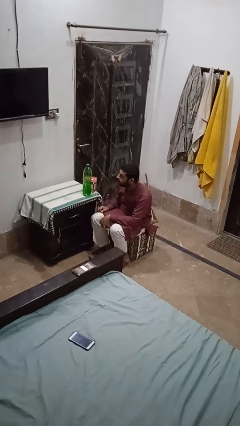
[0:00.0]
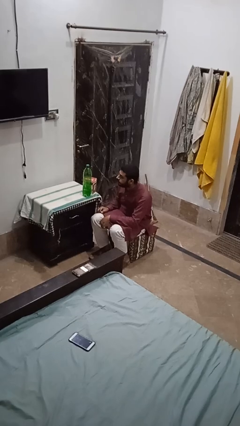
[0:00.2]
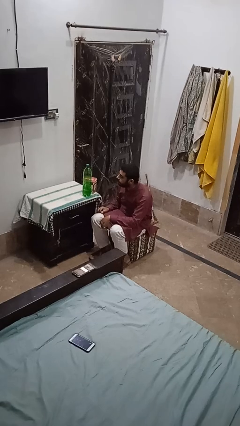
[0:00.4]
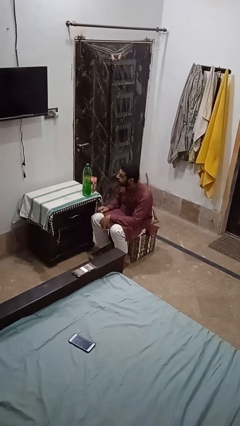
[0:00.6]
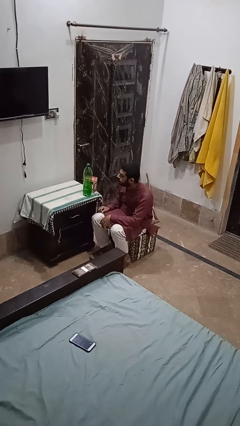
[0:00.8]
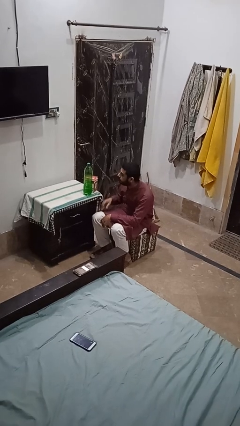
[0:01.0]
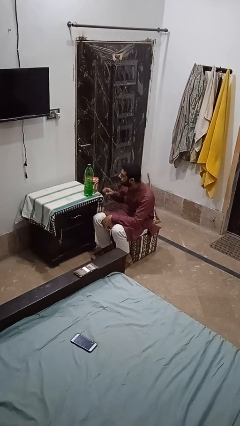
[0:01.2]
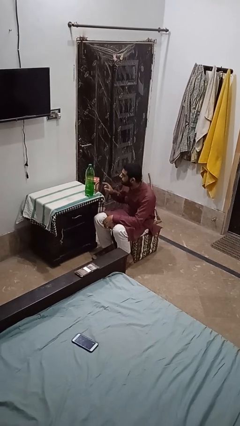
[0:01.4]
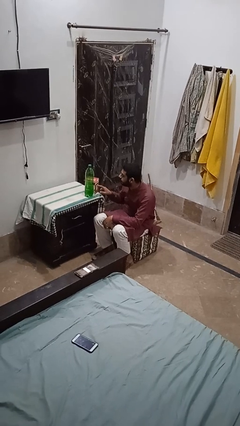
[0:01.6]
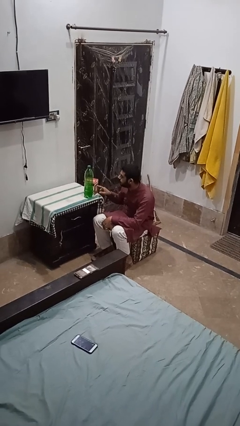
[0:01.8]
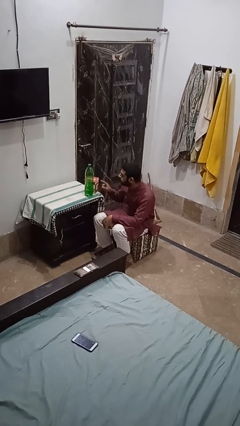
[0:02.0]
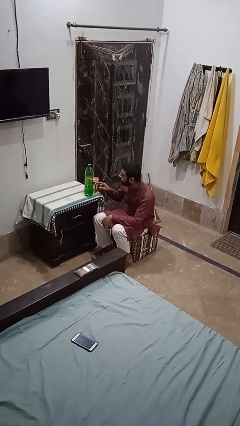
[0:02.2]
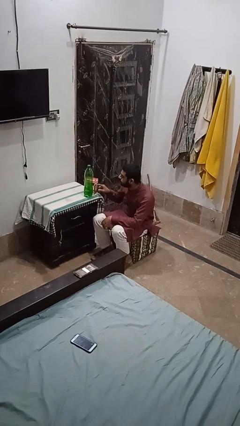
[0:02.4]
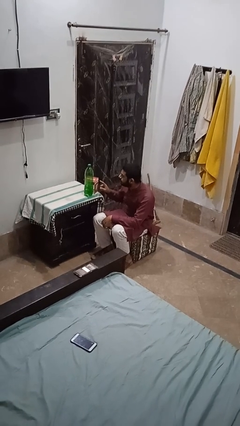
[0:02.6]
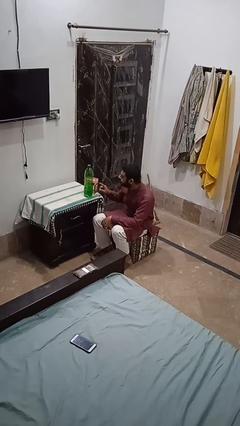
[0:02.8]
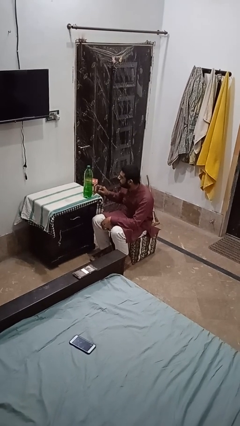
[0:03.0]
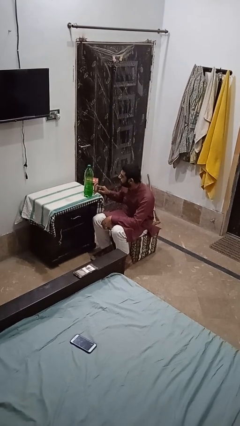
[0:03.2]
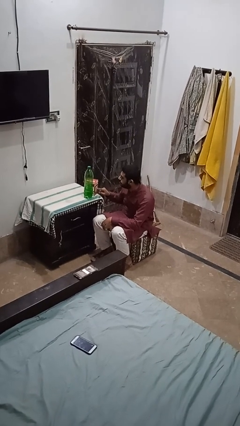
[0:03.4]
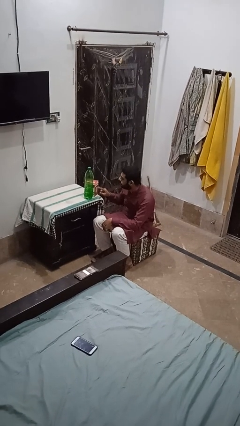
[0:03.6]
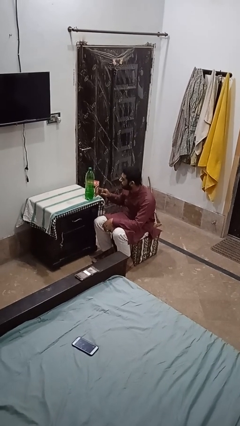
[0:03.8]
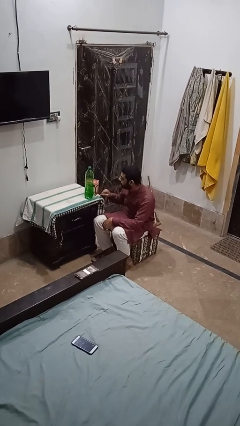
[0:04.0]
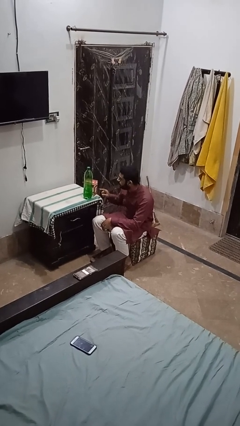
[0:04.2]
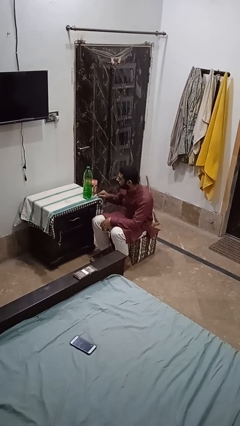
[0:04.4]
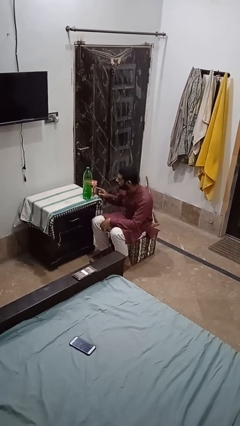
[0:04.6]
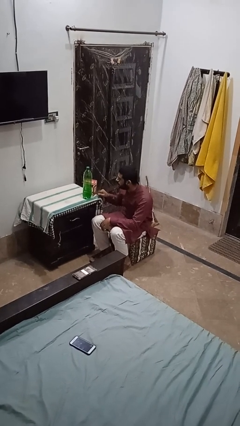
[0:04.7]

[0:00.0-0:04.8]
person taps object with finger

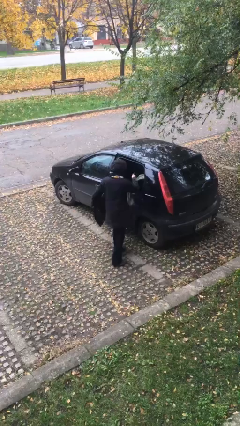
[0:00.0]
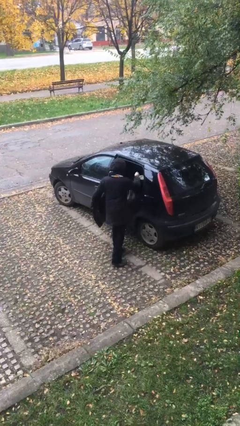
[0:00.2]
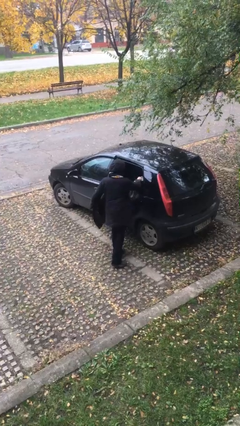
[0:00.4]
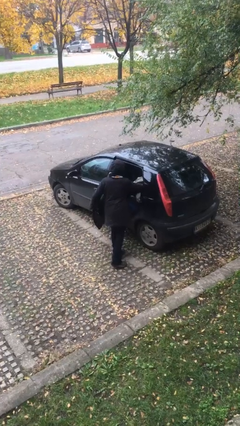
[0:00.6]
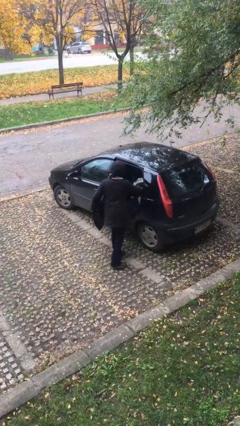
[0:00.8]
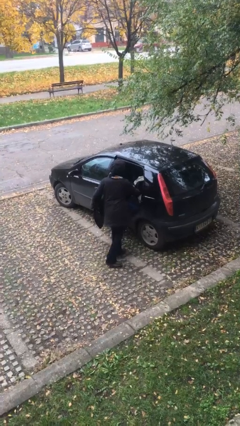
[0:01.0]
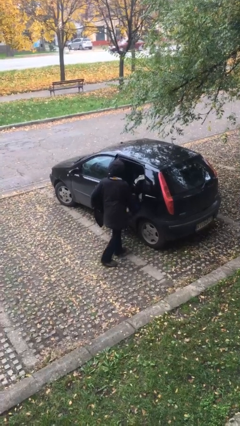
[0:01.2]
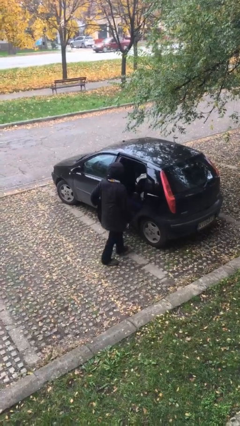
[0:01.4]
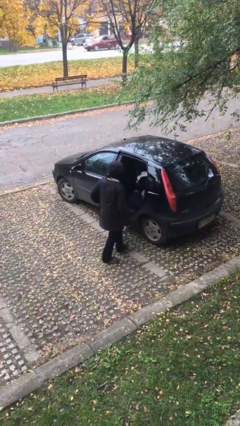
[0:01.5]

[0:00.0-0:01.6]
person loads car

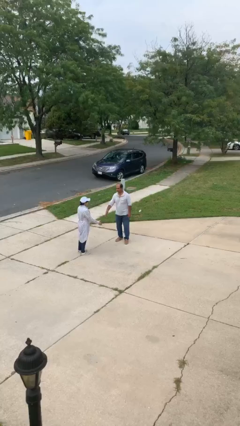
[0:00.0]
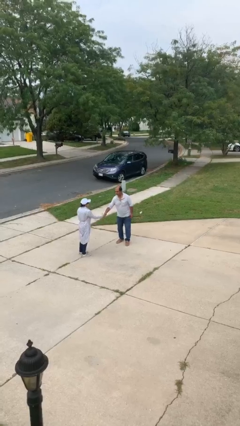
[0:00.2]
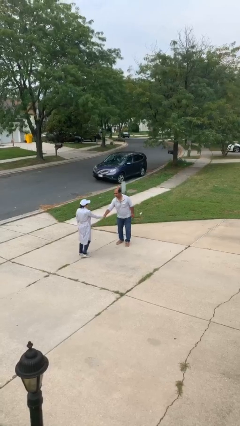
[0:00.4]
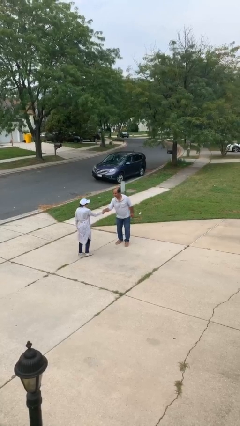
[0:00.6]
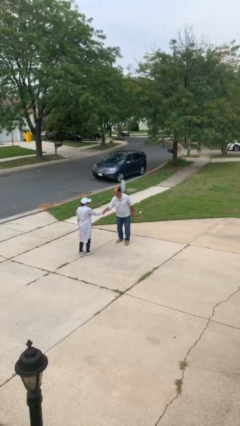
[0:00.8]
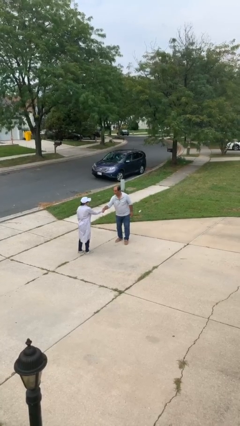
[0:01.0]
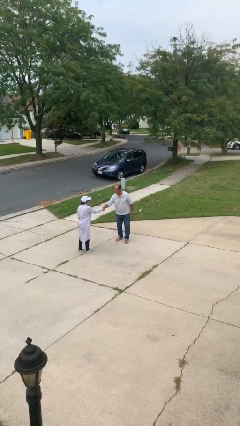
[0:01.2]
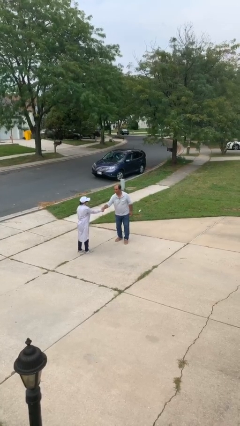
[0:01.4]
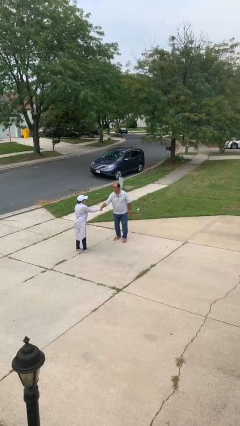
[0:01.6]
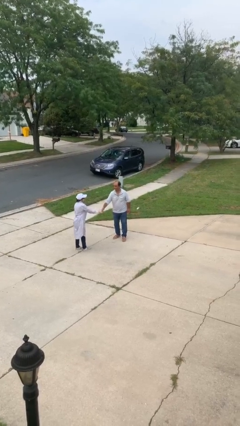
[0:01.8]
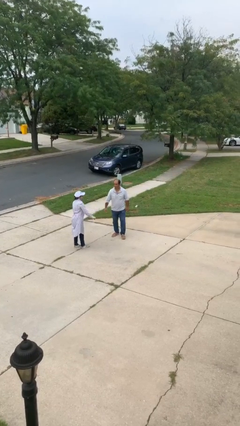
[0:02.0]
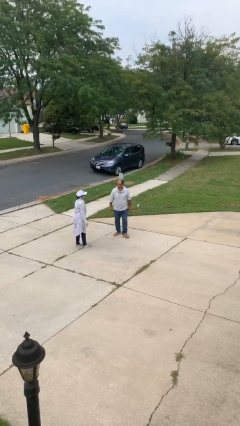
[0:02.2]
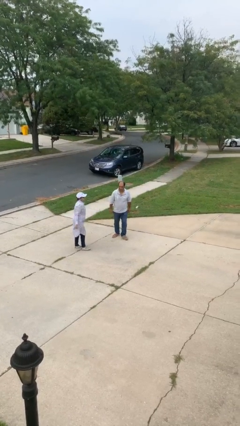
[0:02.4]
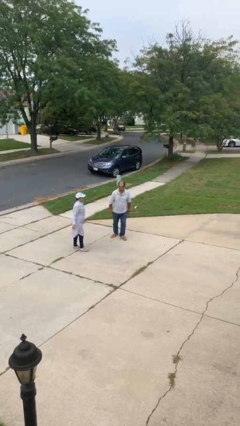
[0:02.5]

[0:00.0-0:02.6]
person shakes hand

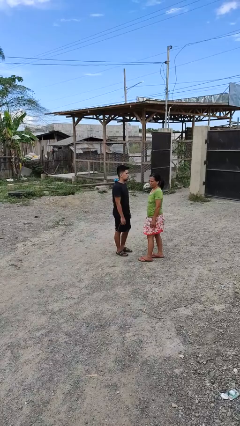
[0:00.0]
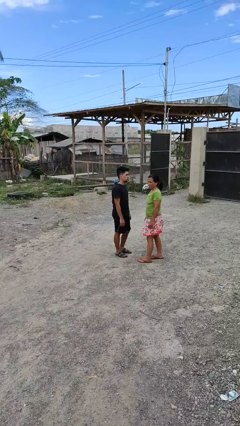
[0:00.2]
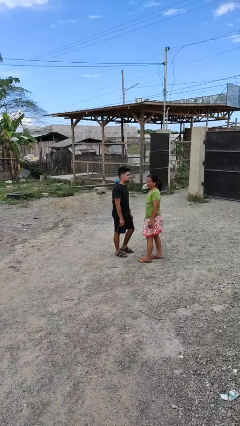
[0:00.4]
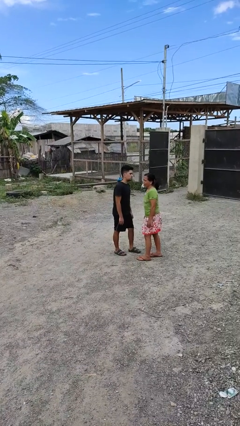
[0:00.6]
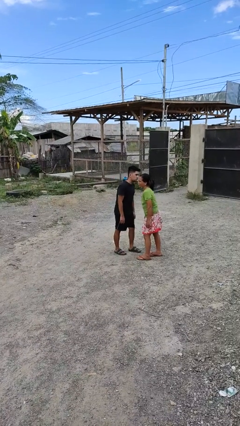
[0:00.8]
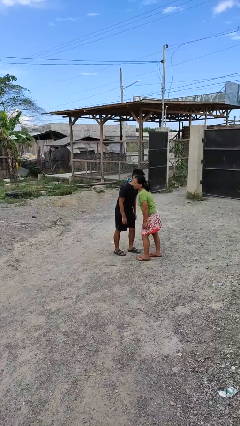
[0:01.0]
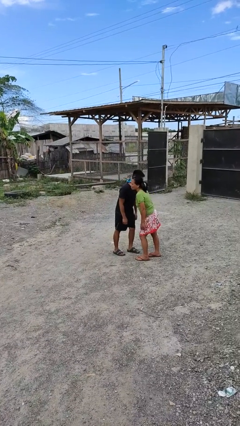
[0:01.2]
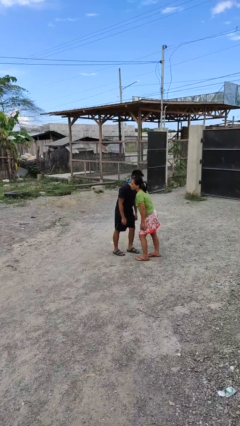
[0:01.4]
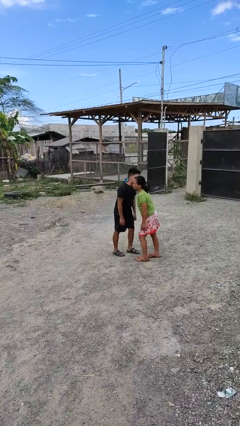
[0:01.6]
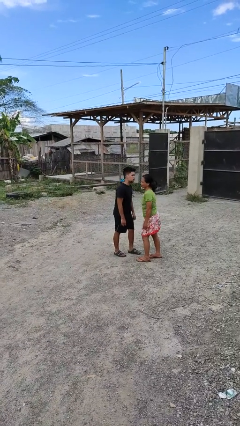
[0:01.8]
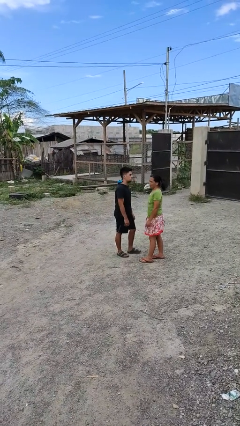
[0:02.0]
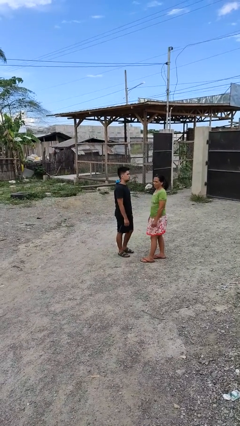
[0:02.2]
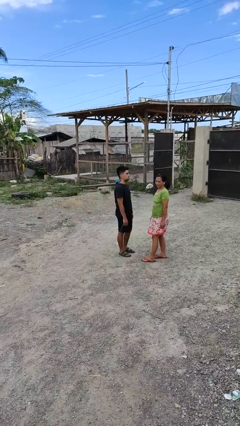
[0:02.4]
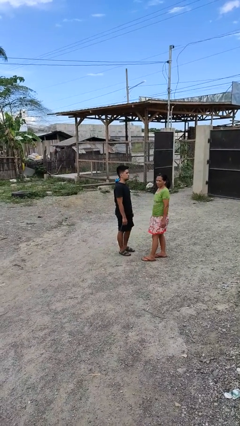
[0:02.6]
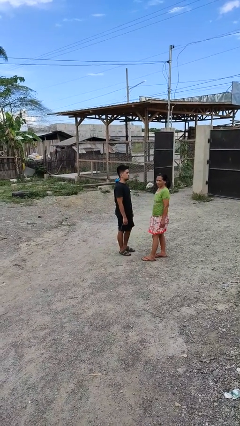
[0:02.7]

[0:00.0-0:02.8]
person kisses cheek of person

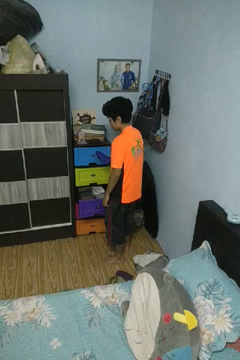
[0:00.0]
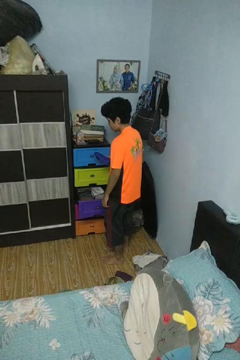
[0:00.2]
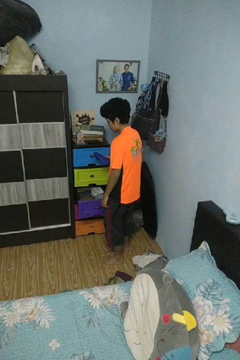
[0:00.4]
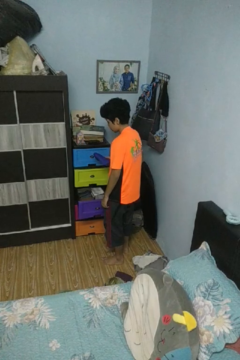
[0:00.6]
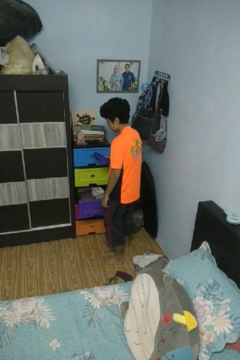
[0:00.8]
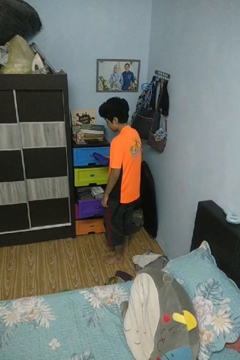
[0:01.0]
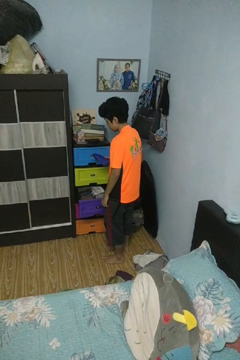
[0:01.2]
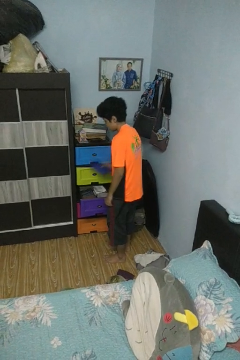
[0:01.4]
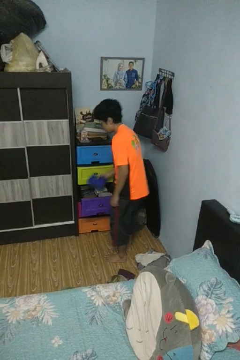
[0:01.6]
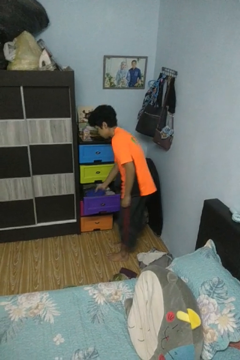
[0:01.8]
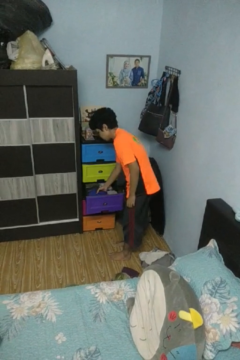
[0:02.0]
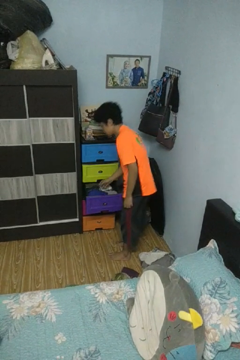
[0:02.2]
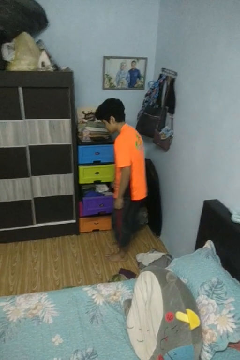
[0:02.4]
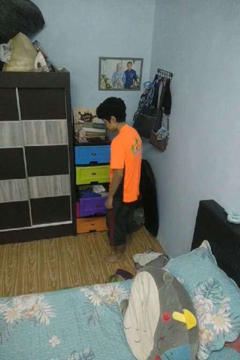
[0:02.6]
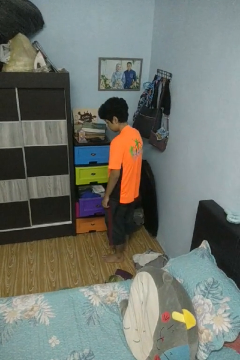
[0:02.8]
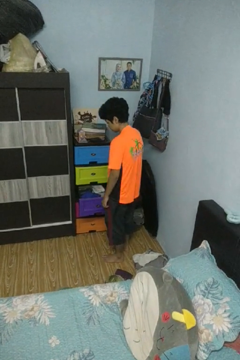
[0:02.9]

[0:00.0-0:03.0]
person puts clothes into dresser

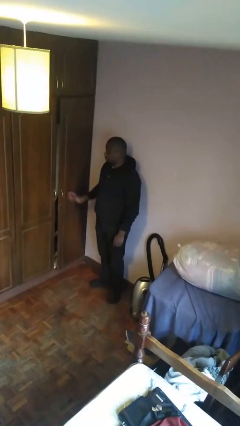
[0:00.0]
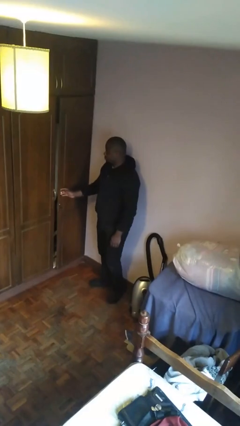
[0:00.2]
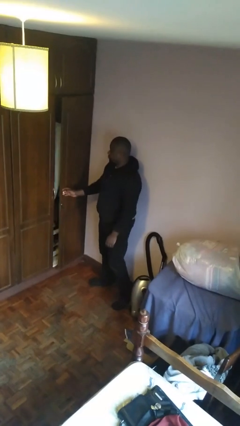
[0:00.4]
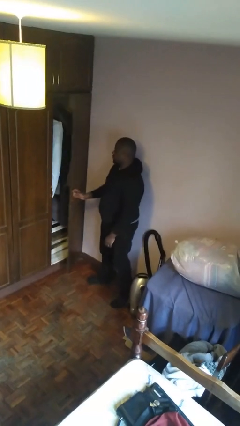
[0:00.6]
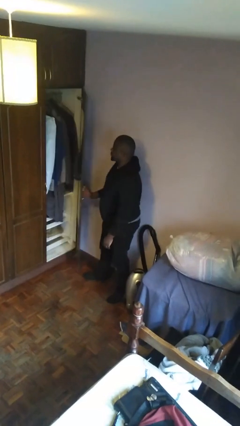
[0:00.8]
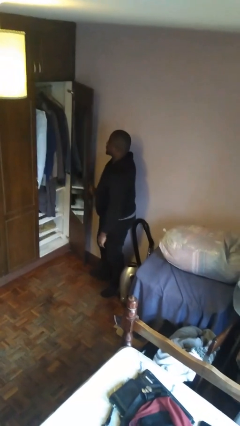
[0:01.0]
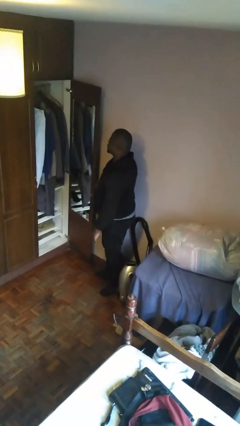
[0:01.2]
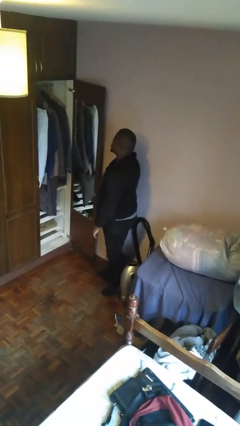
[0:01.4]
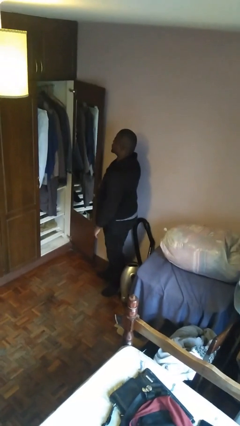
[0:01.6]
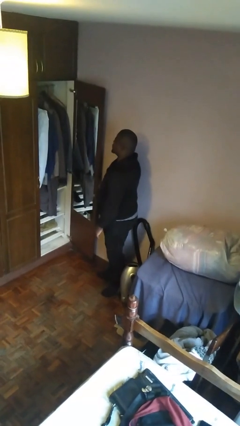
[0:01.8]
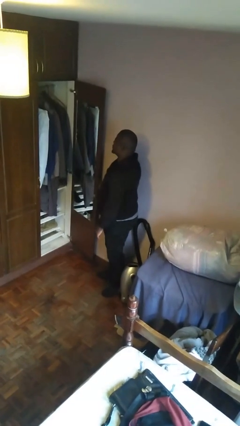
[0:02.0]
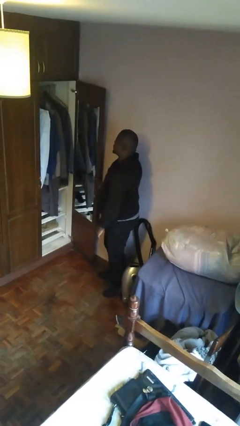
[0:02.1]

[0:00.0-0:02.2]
person opens closet door

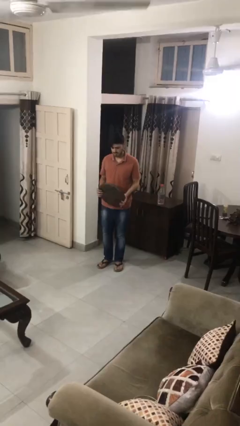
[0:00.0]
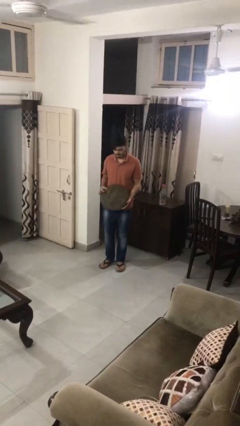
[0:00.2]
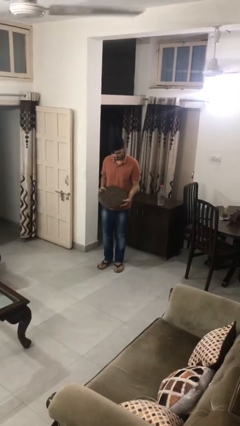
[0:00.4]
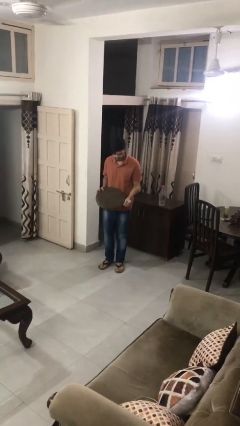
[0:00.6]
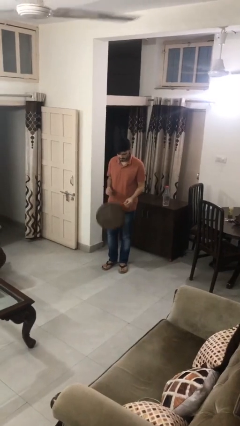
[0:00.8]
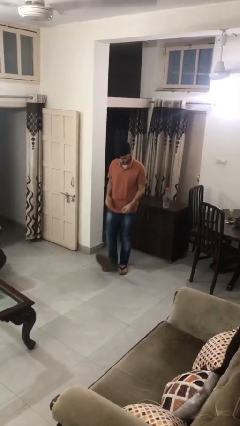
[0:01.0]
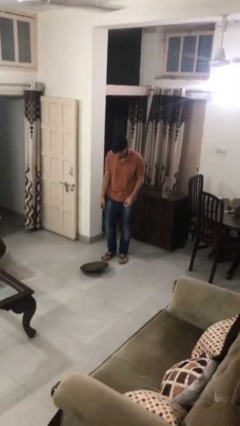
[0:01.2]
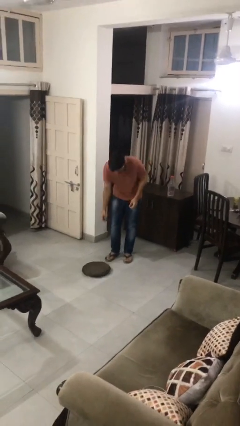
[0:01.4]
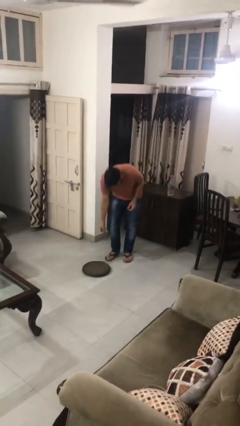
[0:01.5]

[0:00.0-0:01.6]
person drops object
